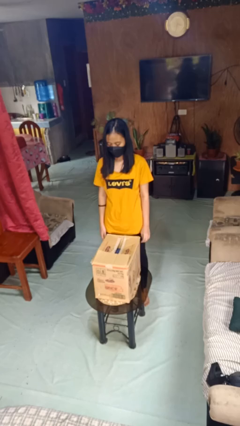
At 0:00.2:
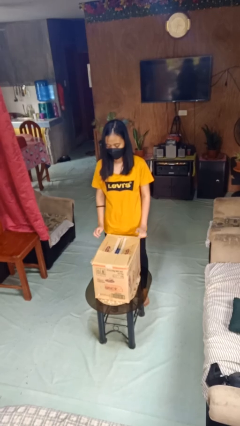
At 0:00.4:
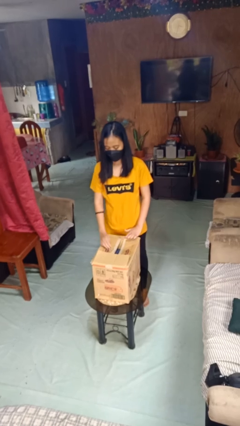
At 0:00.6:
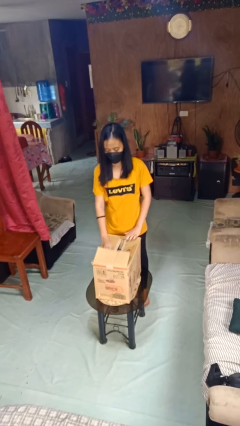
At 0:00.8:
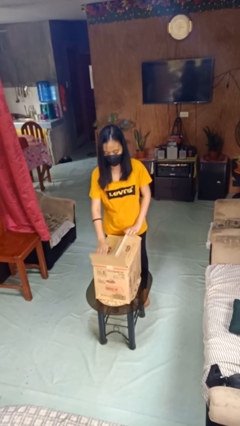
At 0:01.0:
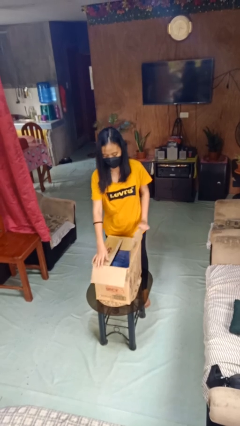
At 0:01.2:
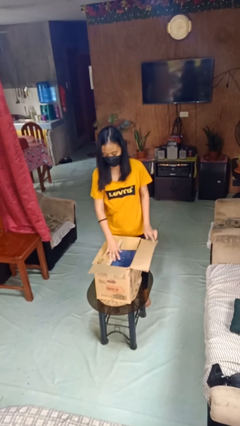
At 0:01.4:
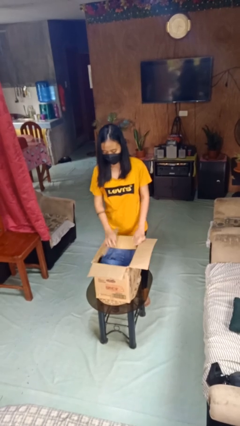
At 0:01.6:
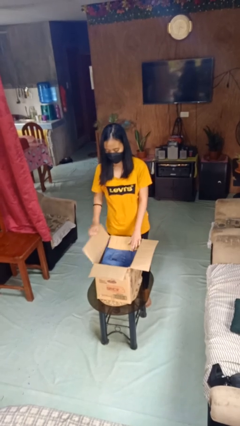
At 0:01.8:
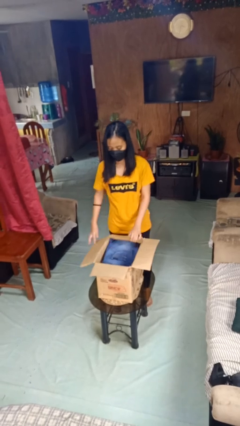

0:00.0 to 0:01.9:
person opens box

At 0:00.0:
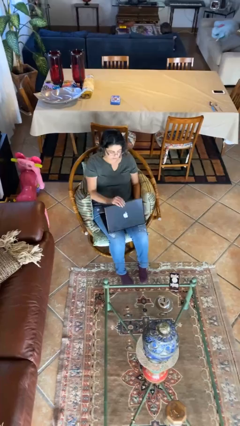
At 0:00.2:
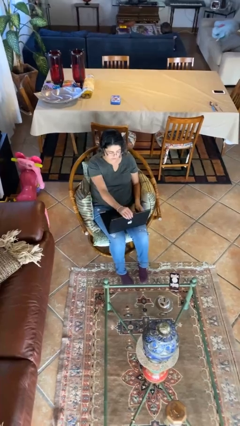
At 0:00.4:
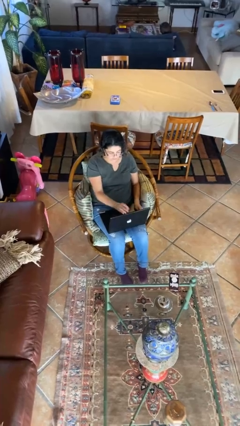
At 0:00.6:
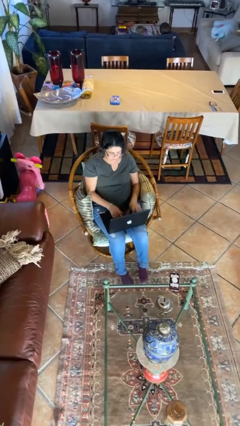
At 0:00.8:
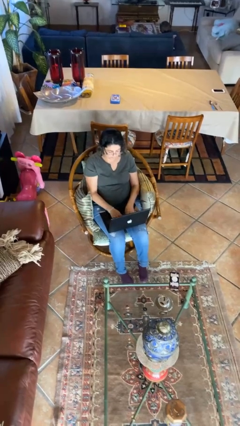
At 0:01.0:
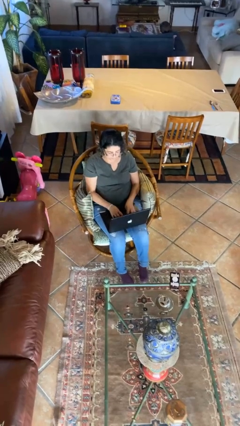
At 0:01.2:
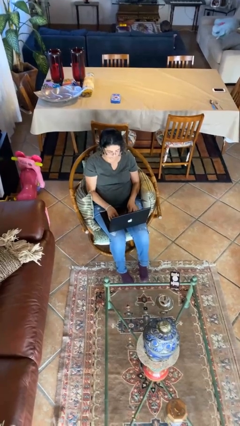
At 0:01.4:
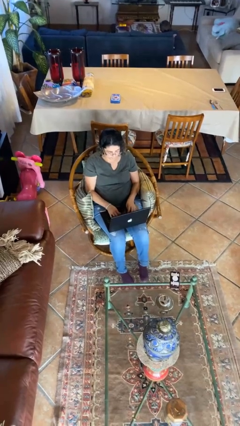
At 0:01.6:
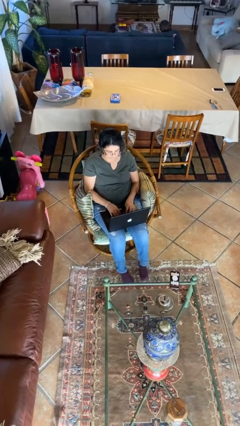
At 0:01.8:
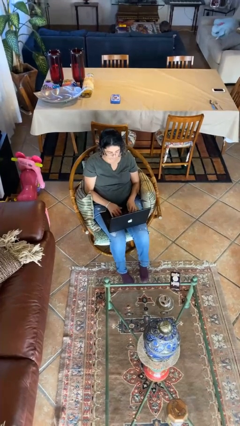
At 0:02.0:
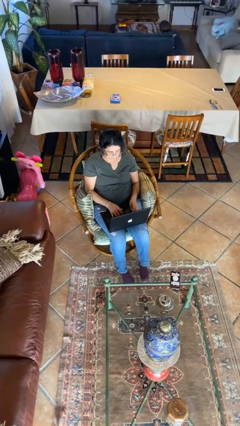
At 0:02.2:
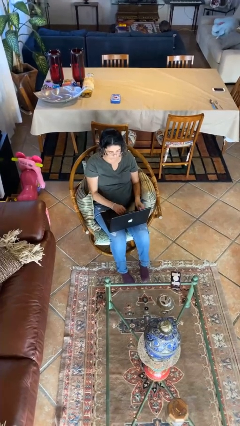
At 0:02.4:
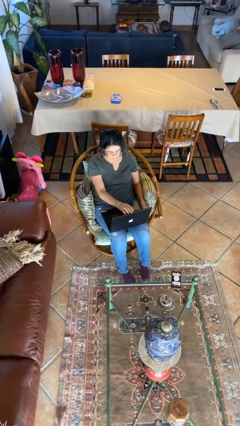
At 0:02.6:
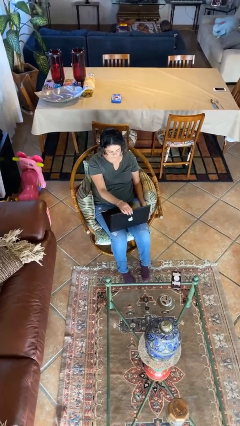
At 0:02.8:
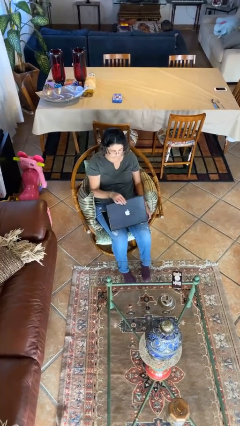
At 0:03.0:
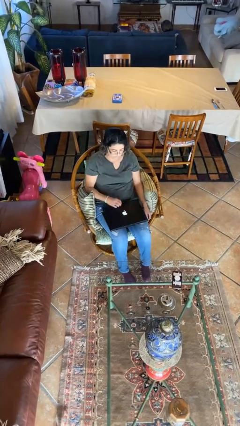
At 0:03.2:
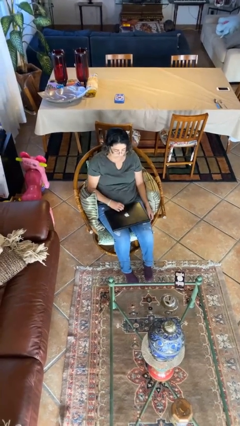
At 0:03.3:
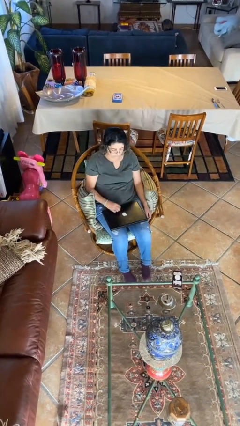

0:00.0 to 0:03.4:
person interacts with laptop

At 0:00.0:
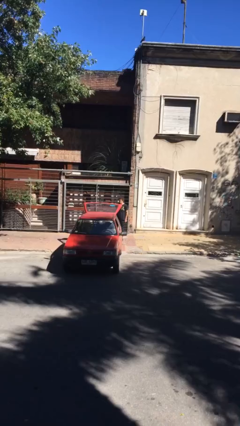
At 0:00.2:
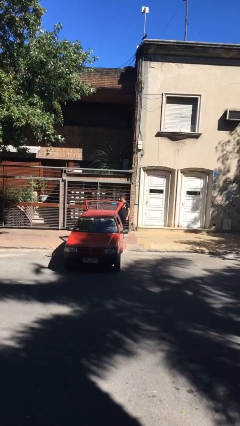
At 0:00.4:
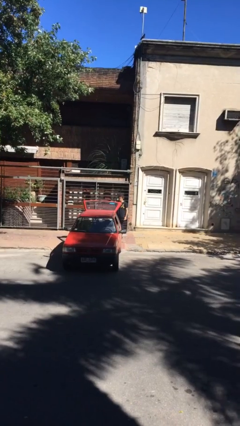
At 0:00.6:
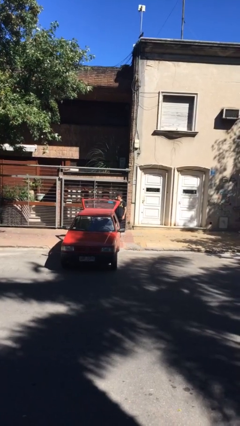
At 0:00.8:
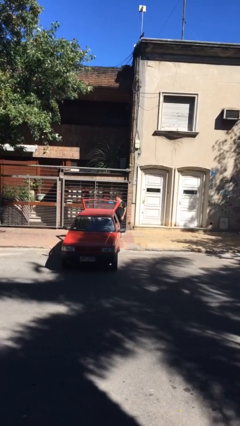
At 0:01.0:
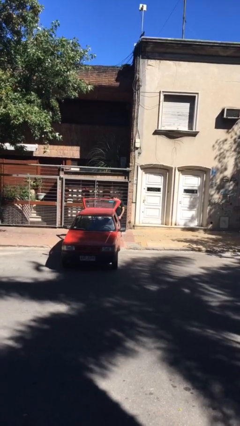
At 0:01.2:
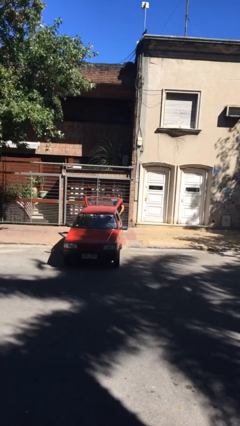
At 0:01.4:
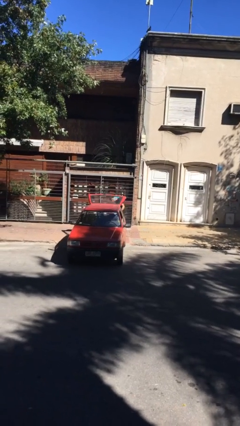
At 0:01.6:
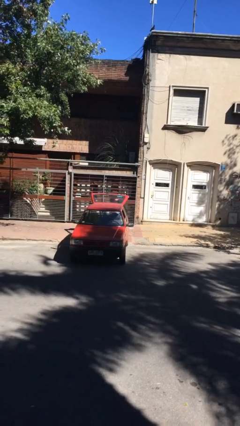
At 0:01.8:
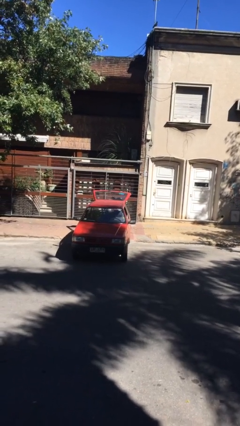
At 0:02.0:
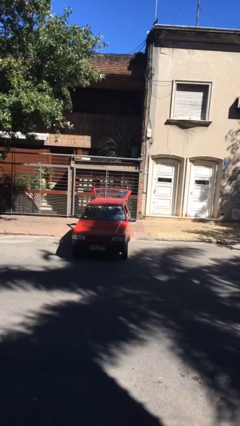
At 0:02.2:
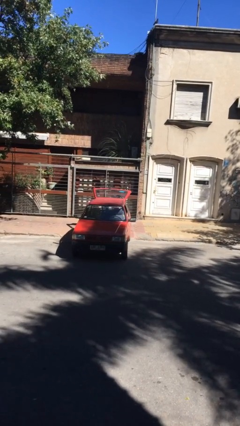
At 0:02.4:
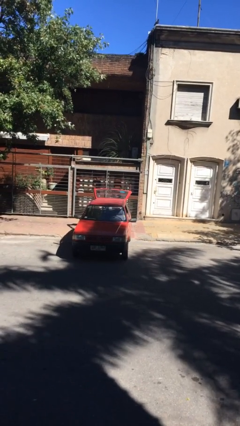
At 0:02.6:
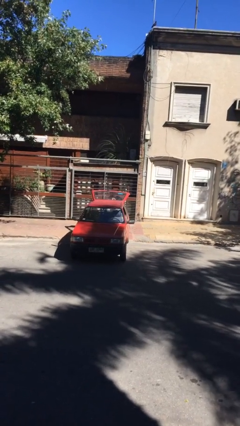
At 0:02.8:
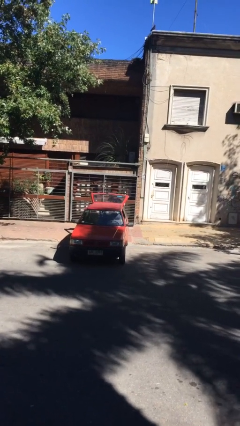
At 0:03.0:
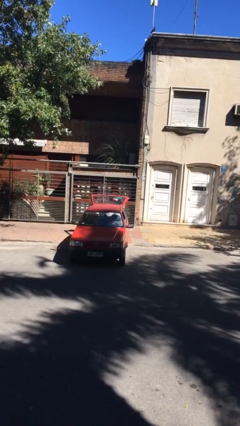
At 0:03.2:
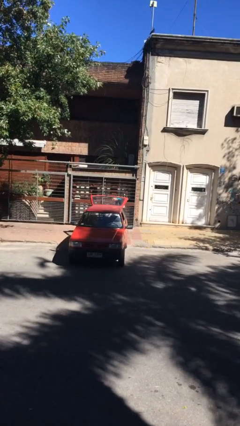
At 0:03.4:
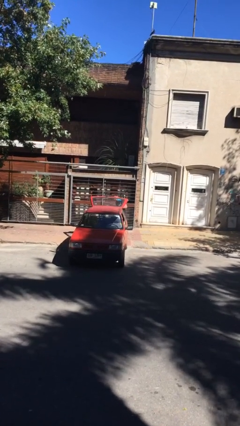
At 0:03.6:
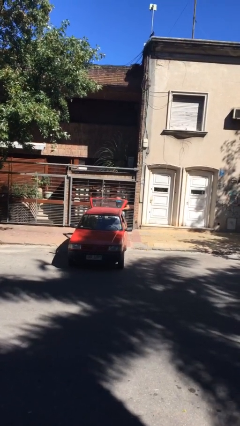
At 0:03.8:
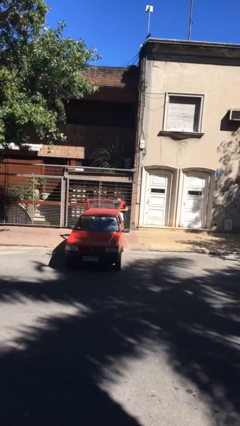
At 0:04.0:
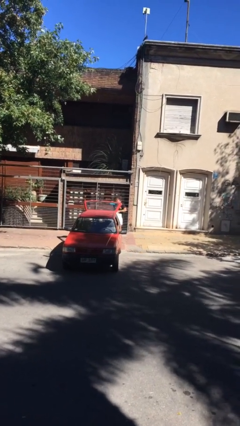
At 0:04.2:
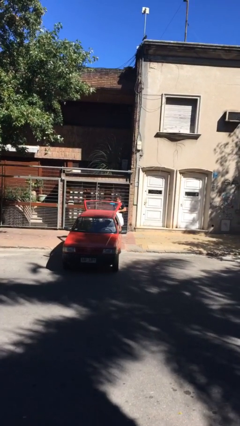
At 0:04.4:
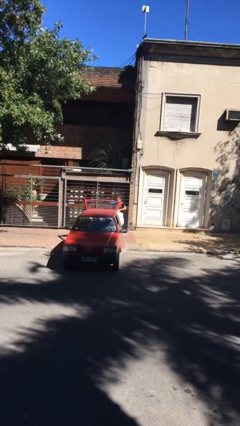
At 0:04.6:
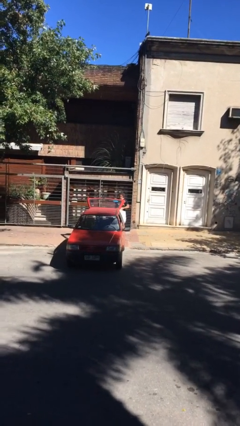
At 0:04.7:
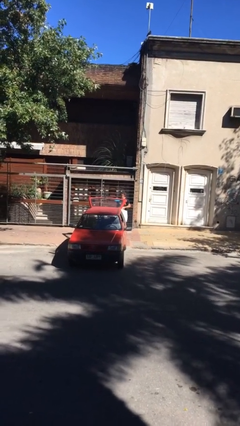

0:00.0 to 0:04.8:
person unloads car

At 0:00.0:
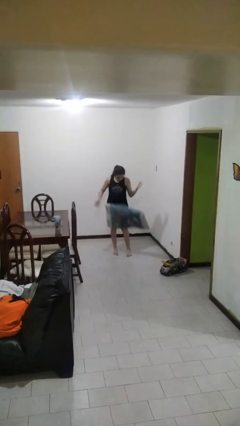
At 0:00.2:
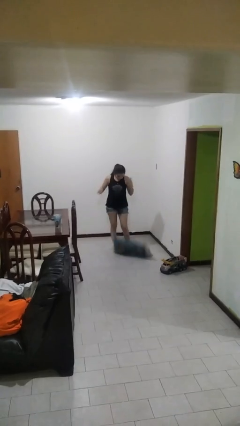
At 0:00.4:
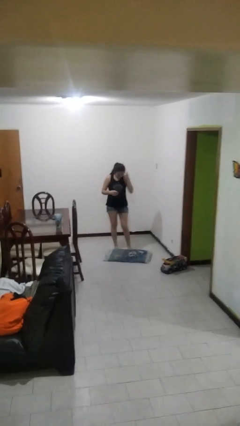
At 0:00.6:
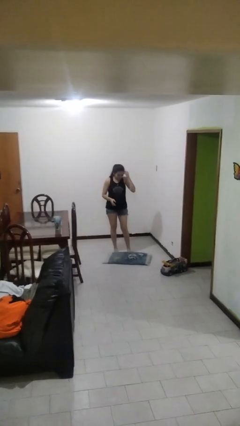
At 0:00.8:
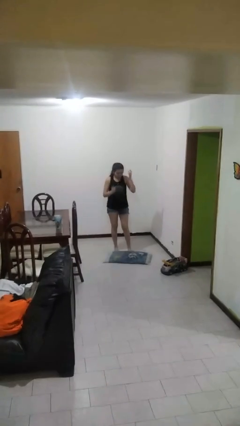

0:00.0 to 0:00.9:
person drops object

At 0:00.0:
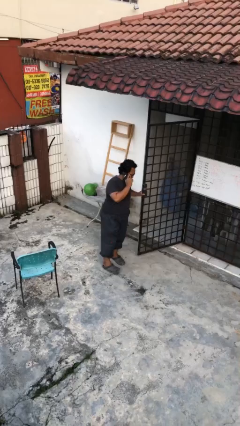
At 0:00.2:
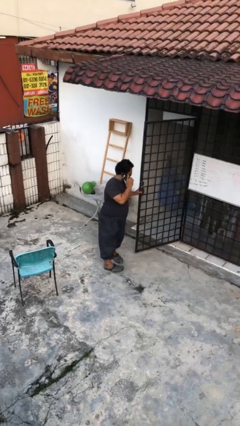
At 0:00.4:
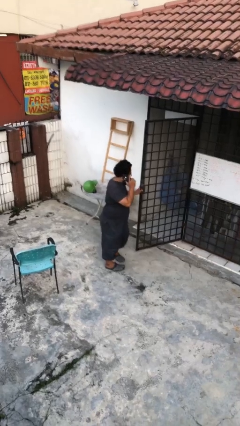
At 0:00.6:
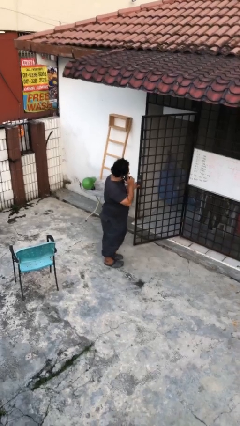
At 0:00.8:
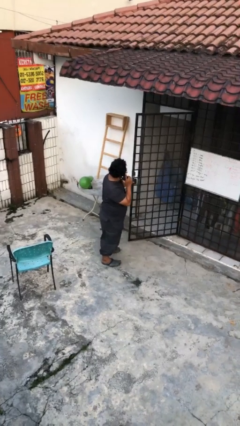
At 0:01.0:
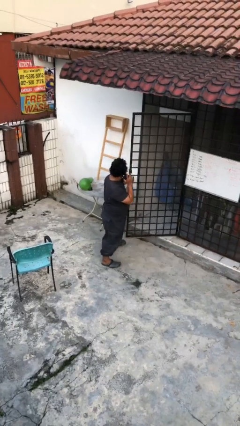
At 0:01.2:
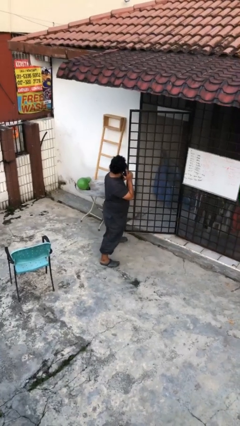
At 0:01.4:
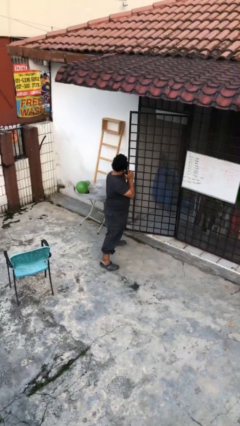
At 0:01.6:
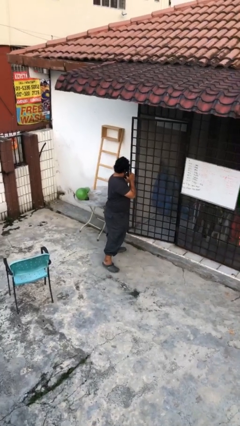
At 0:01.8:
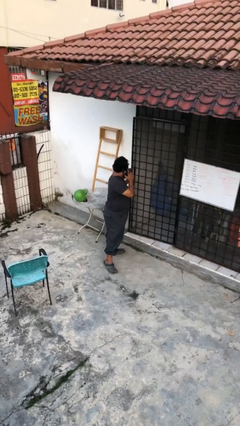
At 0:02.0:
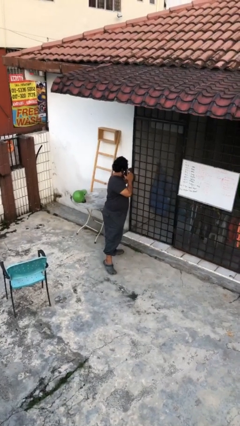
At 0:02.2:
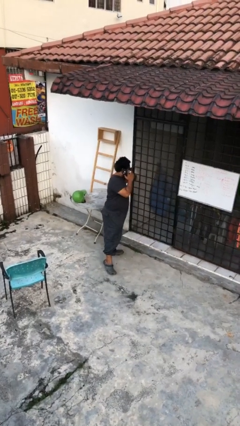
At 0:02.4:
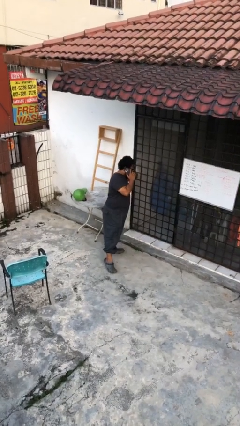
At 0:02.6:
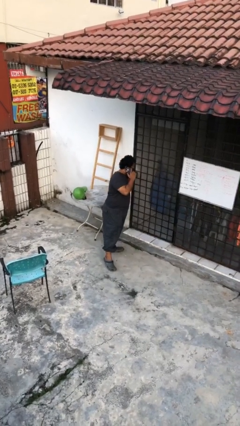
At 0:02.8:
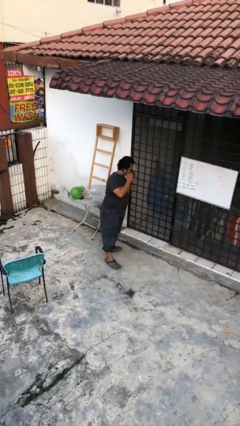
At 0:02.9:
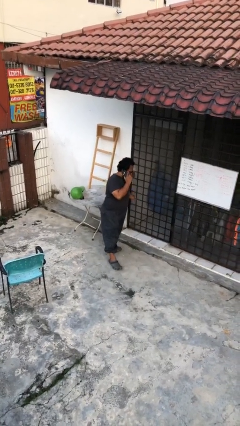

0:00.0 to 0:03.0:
person closes facility door

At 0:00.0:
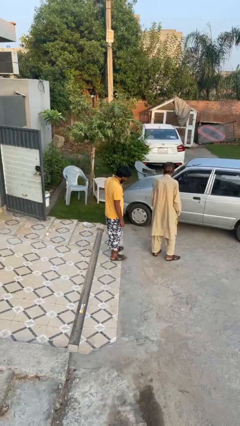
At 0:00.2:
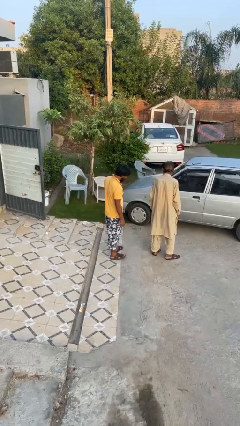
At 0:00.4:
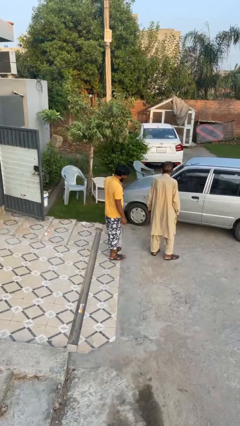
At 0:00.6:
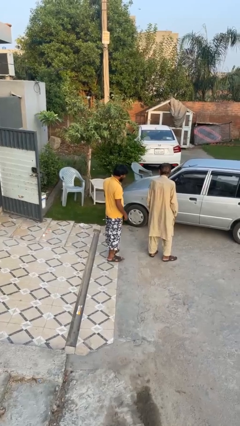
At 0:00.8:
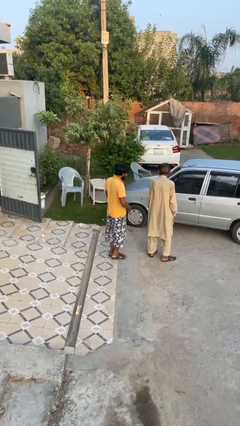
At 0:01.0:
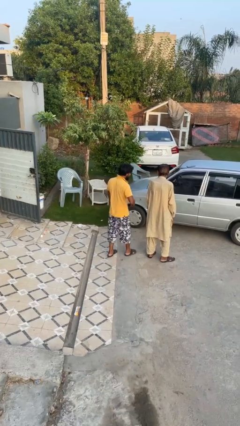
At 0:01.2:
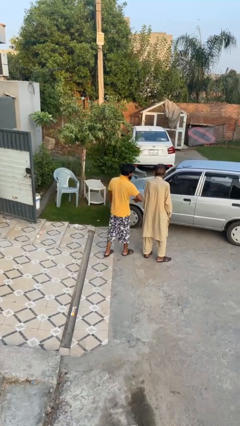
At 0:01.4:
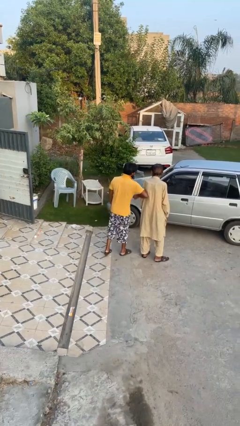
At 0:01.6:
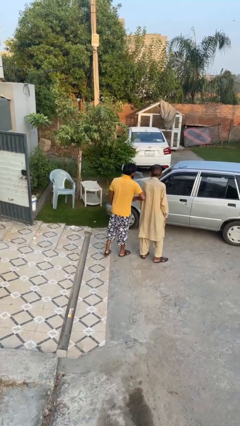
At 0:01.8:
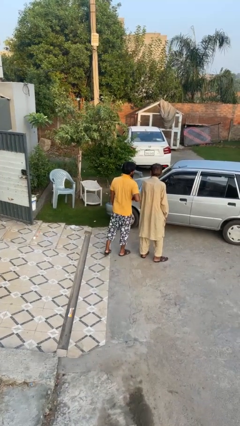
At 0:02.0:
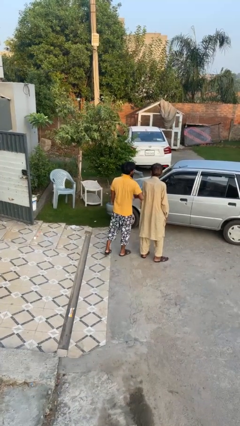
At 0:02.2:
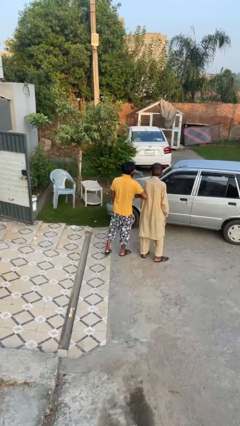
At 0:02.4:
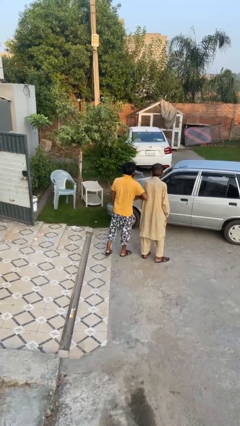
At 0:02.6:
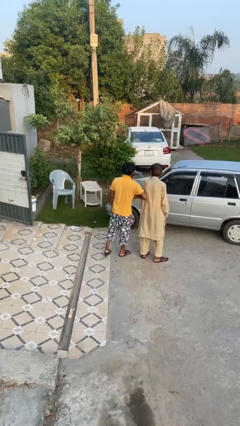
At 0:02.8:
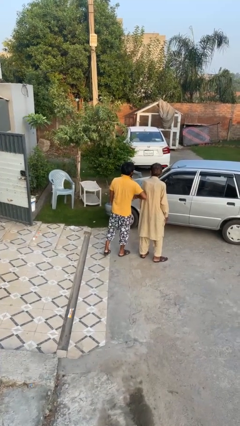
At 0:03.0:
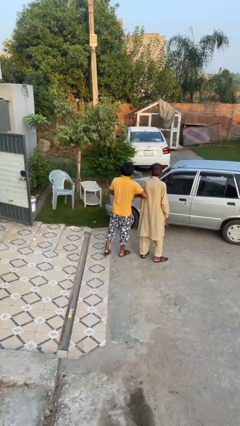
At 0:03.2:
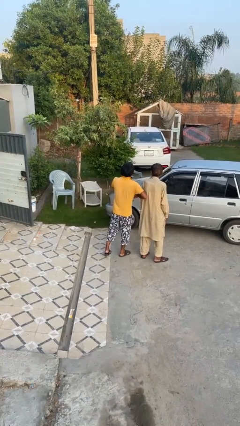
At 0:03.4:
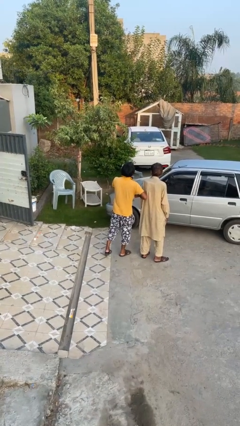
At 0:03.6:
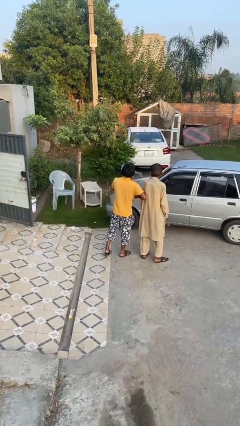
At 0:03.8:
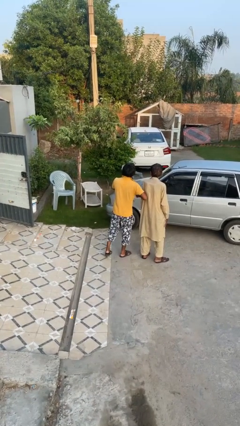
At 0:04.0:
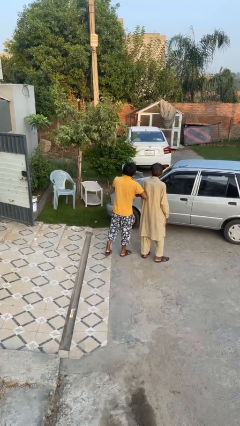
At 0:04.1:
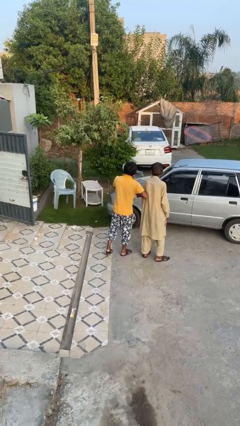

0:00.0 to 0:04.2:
person nudges person with elbow
